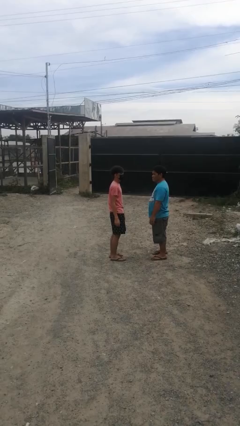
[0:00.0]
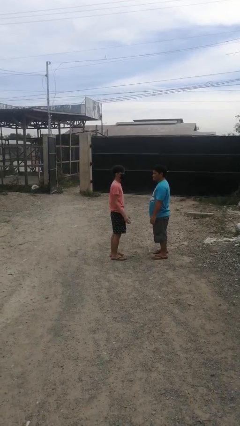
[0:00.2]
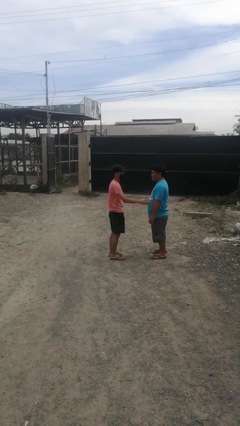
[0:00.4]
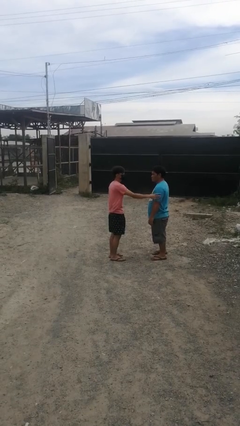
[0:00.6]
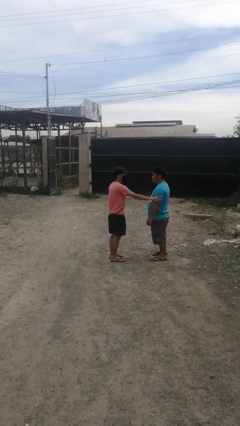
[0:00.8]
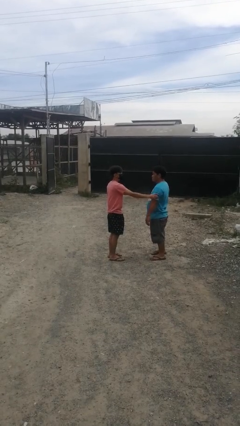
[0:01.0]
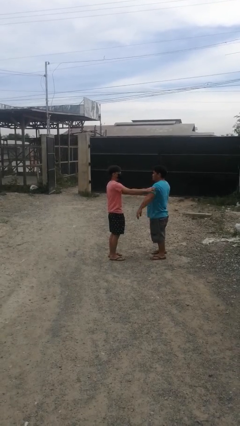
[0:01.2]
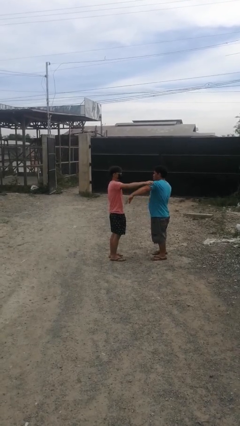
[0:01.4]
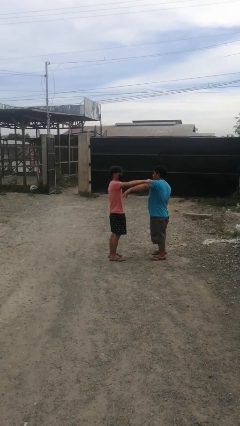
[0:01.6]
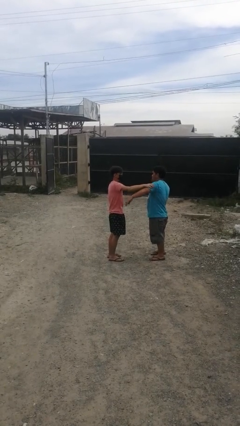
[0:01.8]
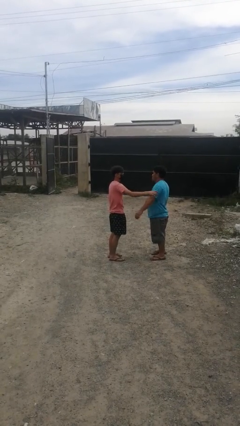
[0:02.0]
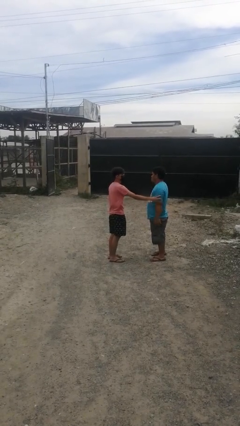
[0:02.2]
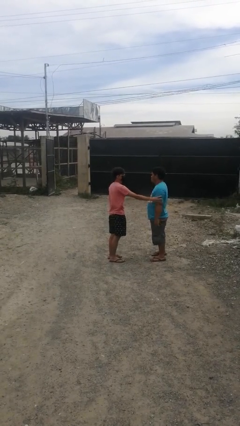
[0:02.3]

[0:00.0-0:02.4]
person grabs person by bicep

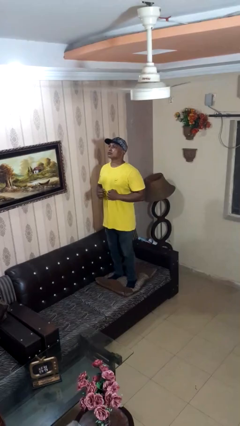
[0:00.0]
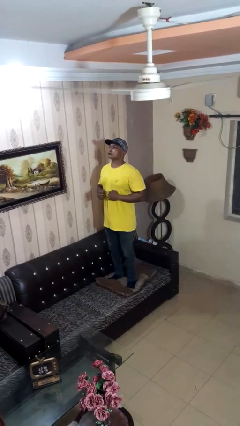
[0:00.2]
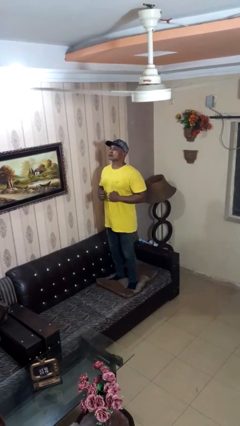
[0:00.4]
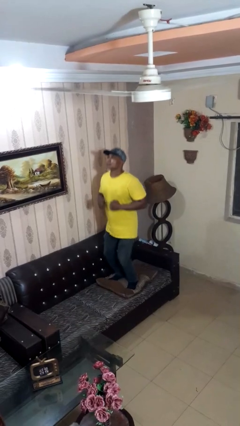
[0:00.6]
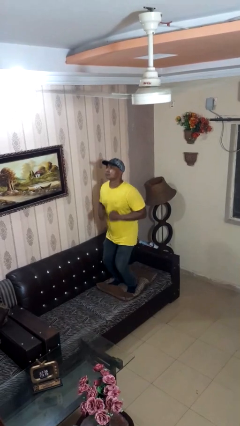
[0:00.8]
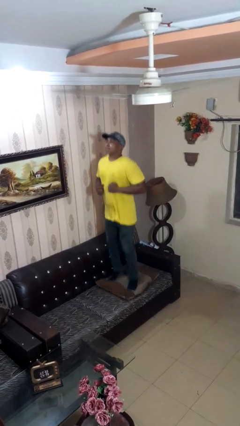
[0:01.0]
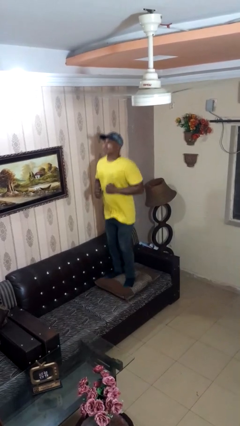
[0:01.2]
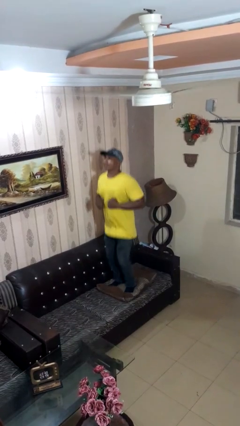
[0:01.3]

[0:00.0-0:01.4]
person jumps on couch

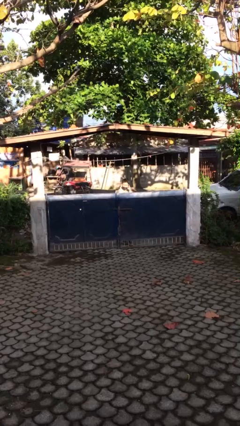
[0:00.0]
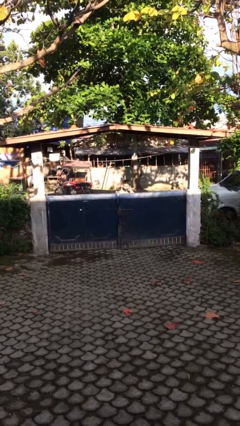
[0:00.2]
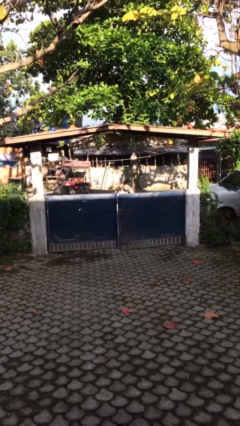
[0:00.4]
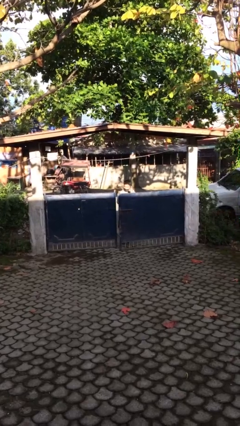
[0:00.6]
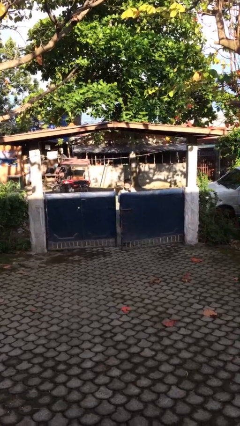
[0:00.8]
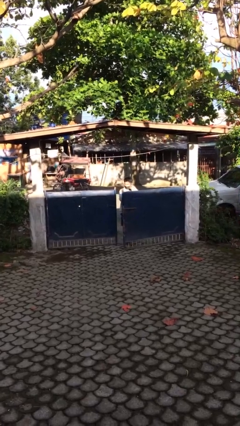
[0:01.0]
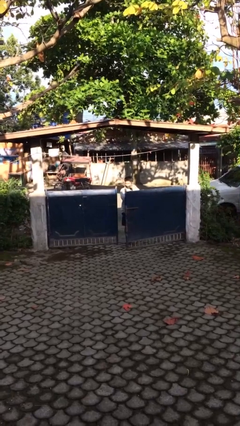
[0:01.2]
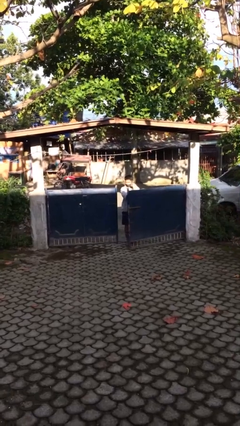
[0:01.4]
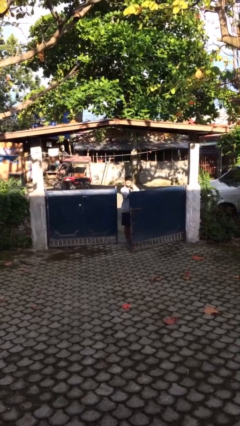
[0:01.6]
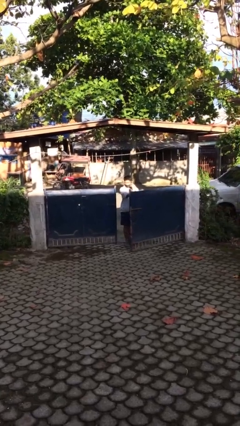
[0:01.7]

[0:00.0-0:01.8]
person opens facility door

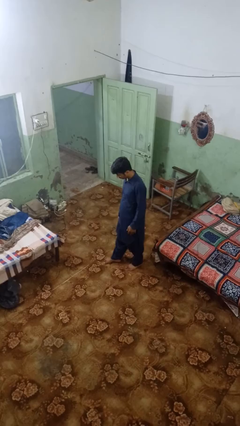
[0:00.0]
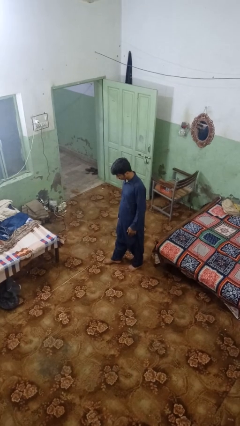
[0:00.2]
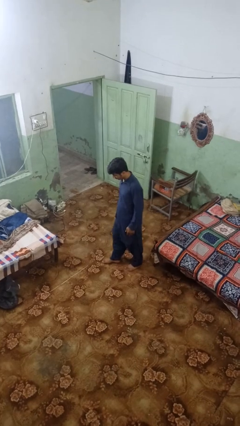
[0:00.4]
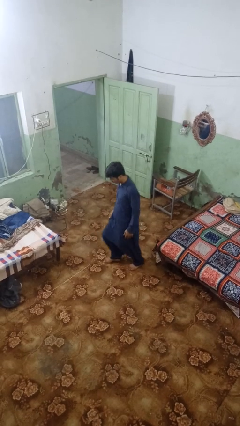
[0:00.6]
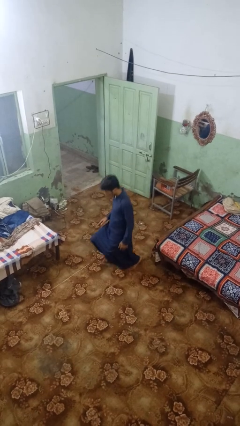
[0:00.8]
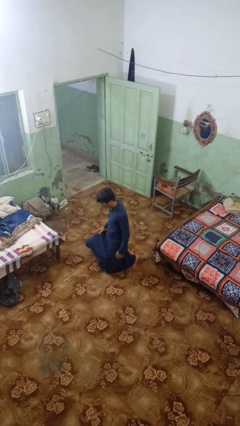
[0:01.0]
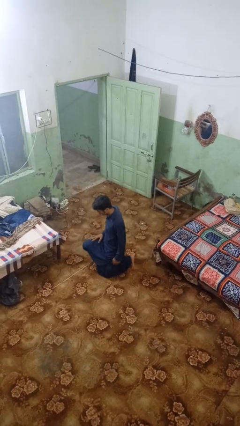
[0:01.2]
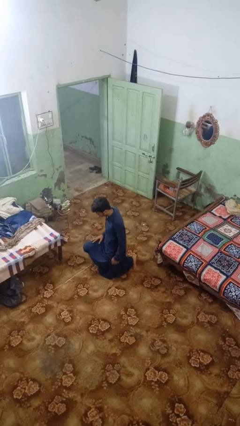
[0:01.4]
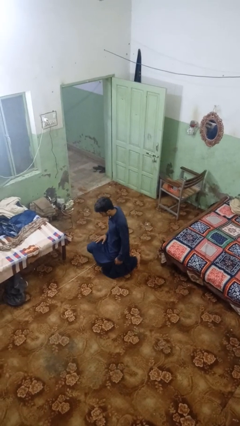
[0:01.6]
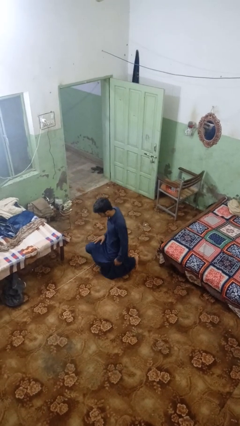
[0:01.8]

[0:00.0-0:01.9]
person kneels

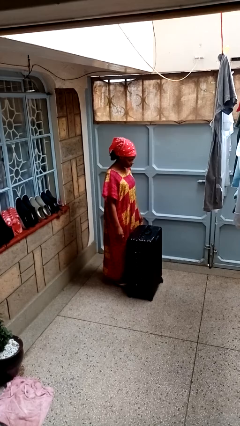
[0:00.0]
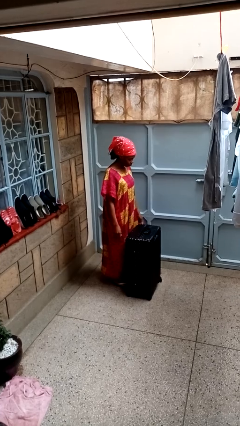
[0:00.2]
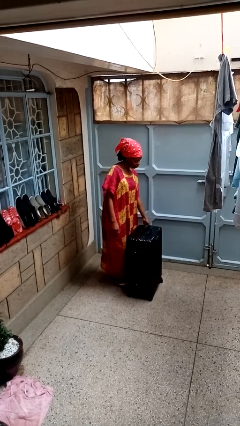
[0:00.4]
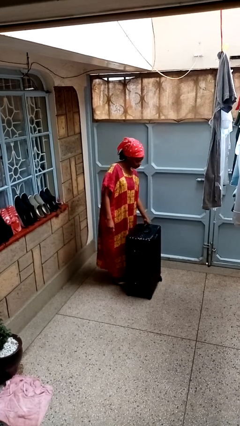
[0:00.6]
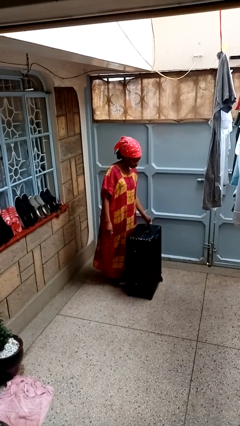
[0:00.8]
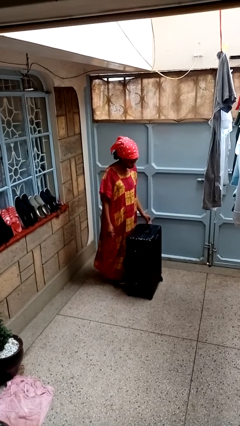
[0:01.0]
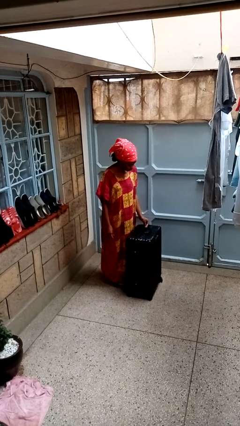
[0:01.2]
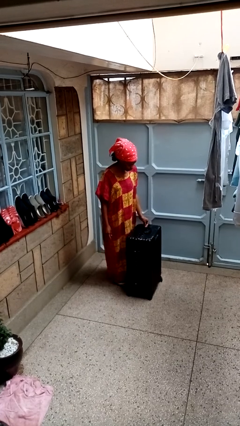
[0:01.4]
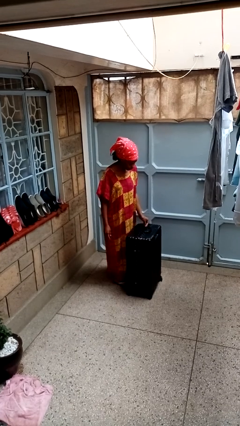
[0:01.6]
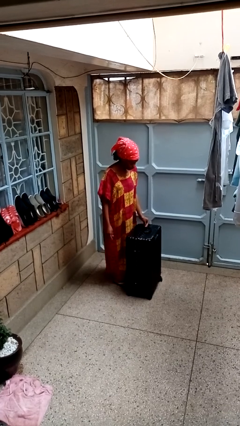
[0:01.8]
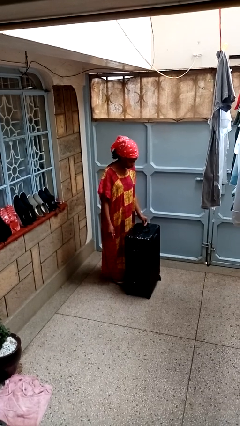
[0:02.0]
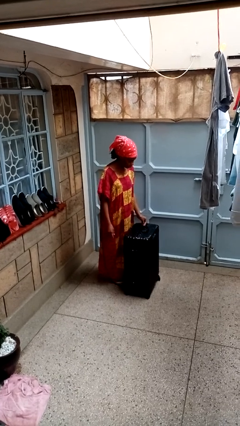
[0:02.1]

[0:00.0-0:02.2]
person opens suitcase

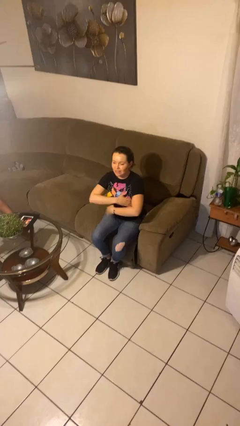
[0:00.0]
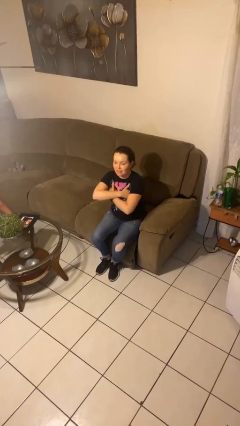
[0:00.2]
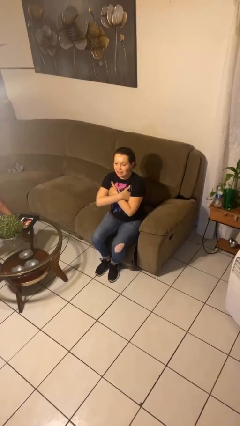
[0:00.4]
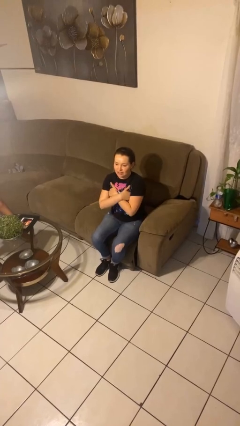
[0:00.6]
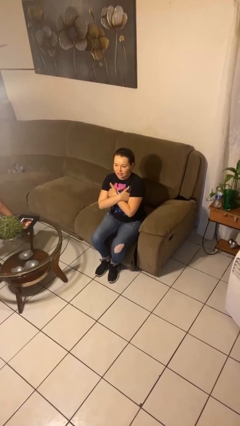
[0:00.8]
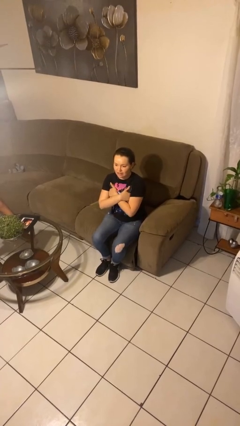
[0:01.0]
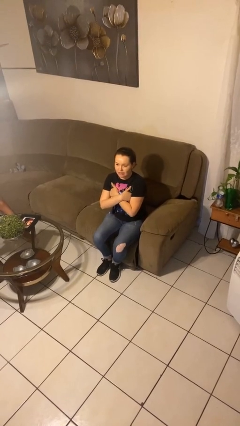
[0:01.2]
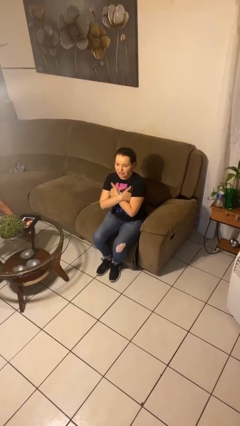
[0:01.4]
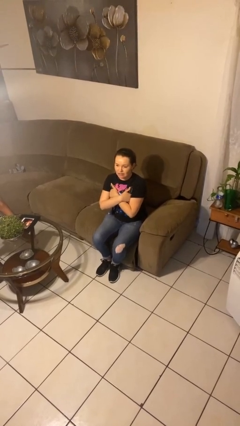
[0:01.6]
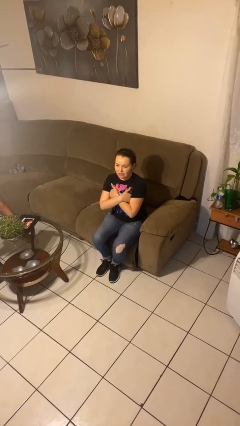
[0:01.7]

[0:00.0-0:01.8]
person gestures arms x

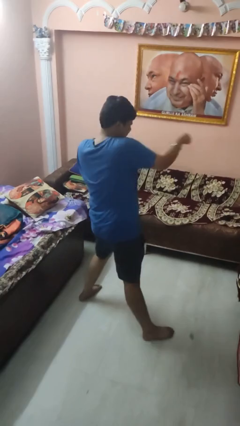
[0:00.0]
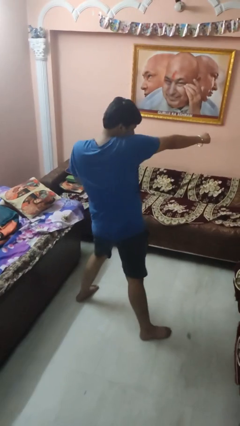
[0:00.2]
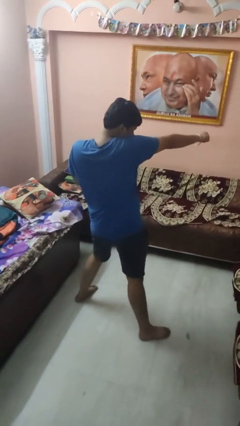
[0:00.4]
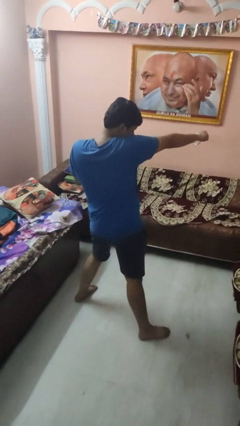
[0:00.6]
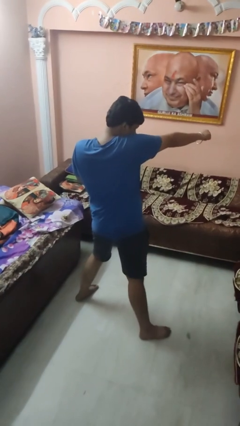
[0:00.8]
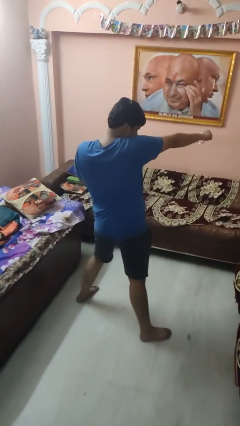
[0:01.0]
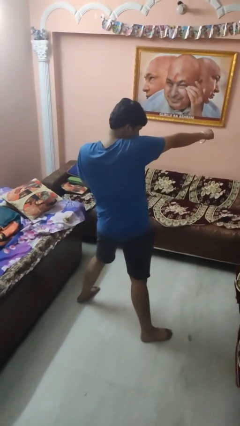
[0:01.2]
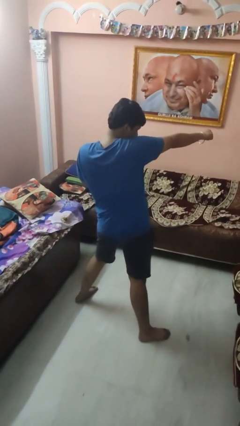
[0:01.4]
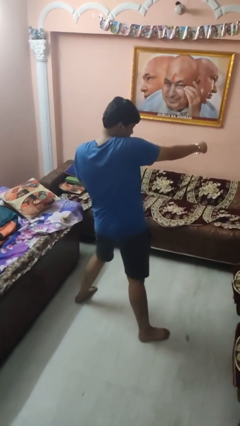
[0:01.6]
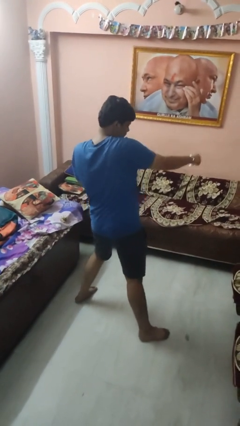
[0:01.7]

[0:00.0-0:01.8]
person punches

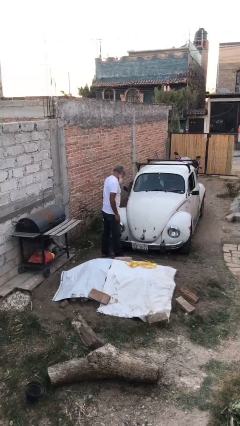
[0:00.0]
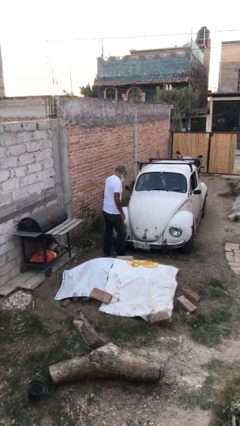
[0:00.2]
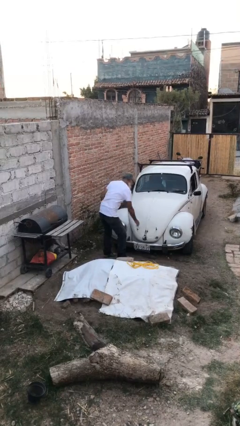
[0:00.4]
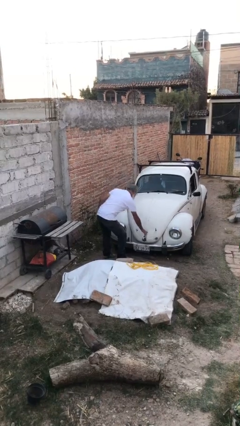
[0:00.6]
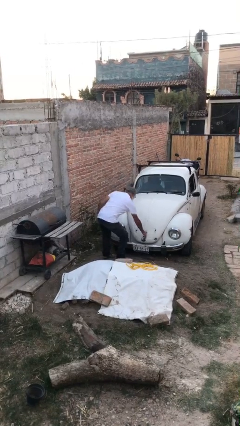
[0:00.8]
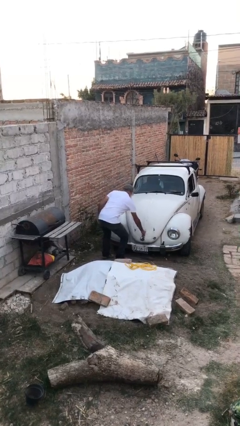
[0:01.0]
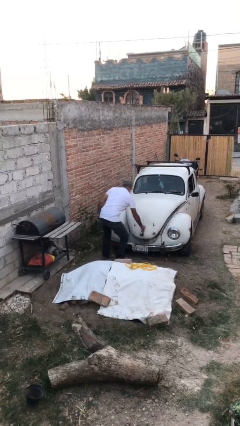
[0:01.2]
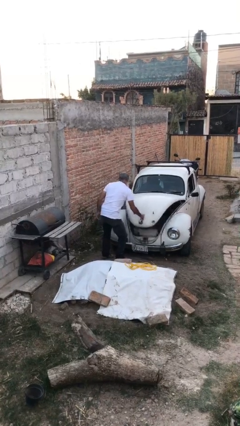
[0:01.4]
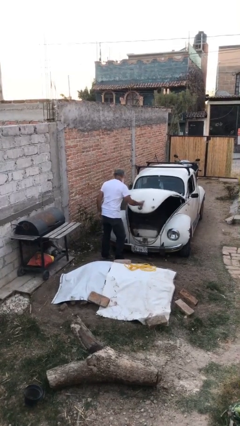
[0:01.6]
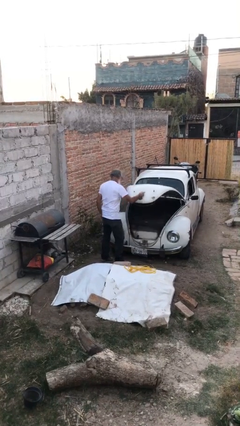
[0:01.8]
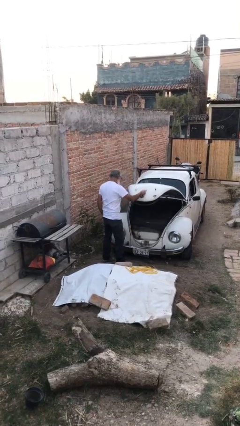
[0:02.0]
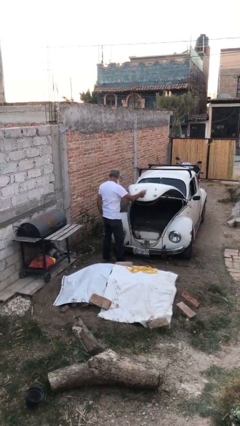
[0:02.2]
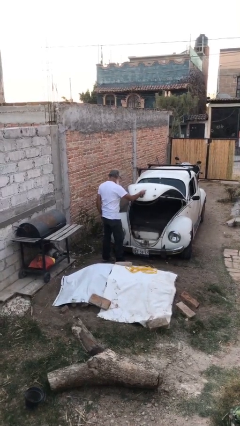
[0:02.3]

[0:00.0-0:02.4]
person opens car trunk

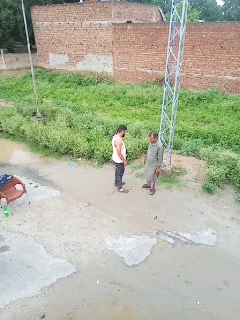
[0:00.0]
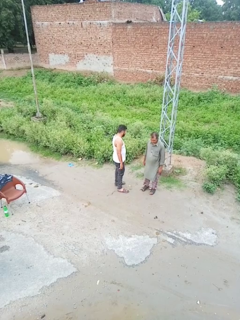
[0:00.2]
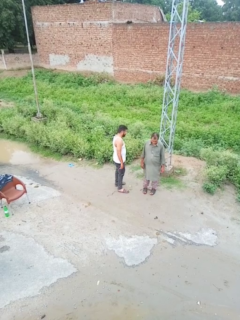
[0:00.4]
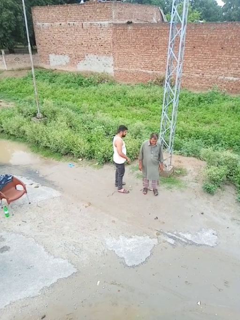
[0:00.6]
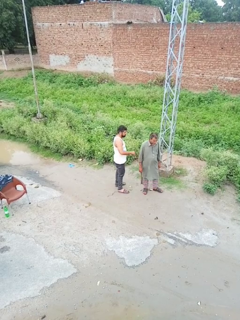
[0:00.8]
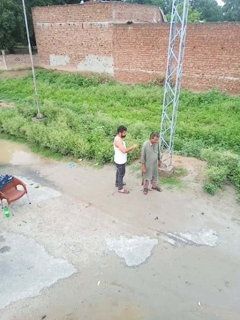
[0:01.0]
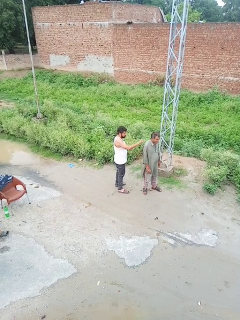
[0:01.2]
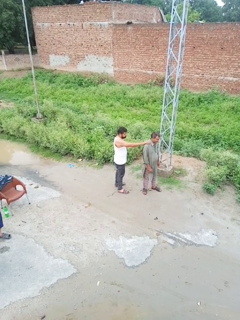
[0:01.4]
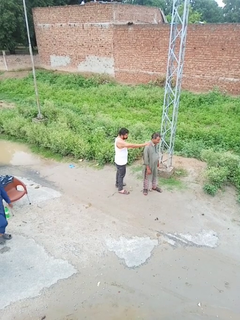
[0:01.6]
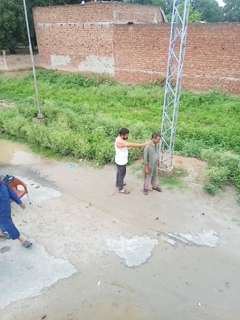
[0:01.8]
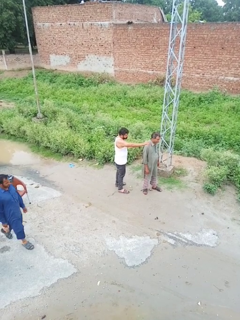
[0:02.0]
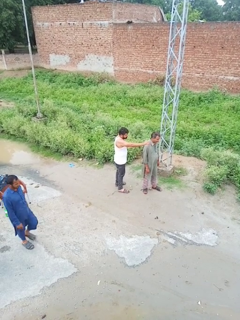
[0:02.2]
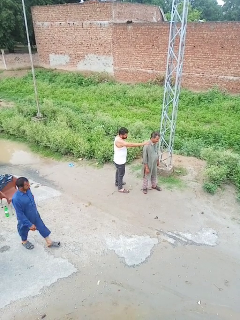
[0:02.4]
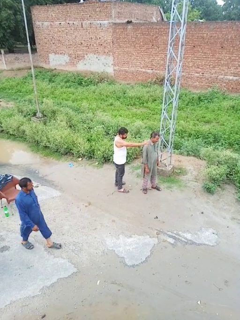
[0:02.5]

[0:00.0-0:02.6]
person grabs person by shoulder
